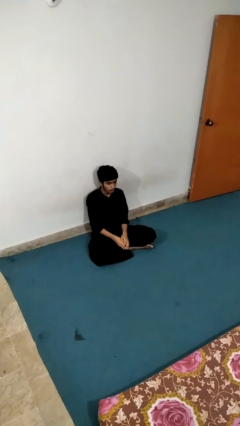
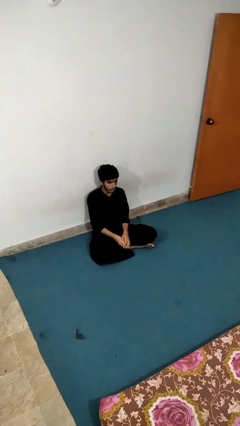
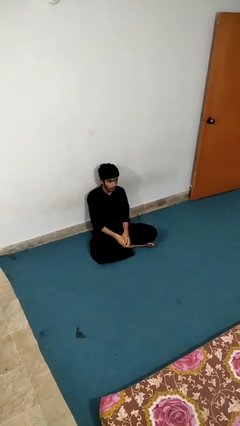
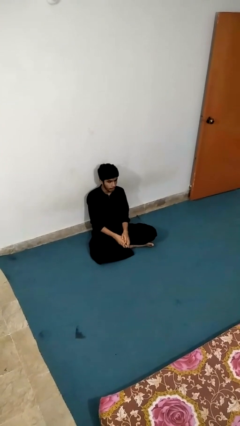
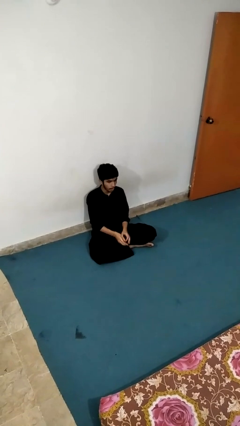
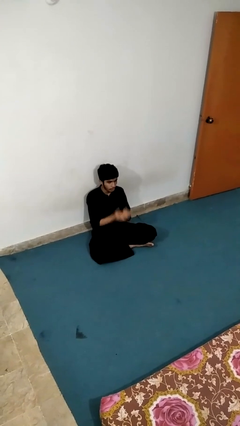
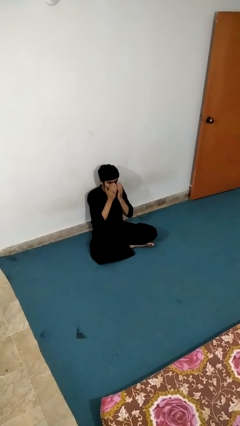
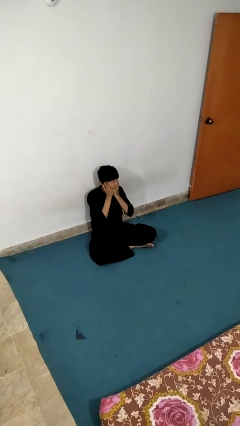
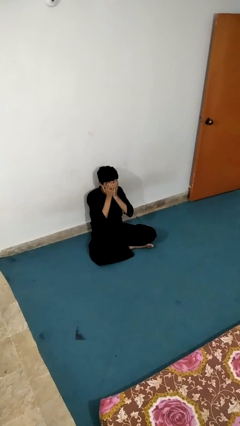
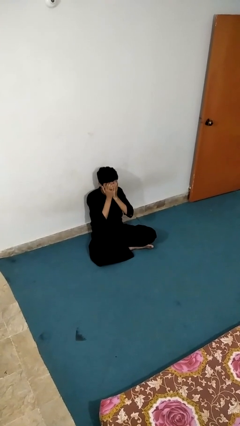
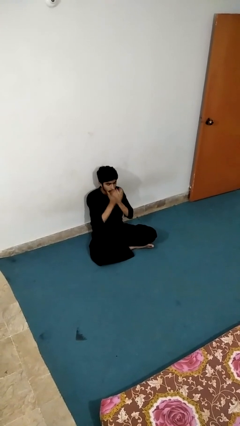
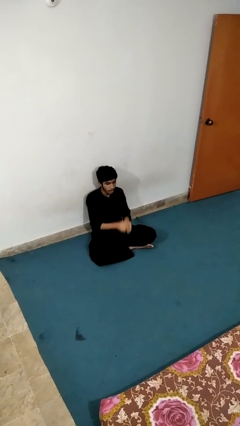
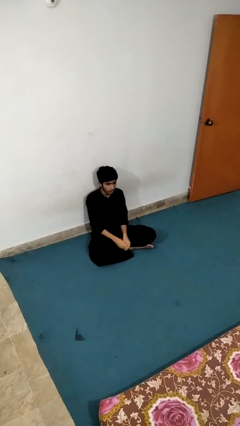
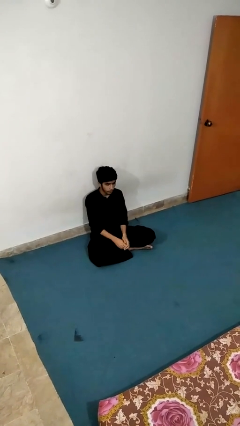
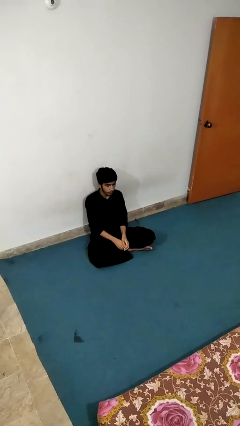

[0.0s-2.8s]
person covers face with hands

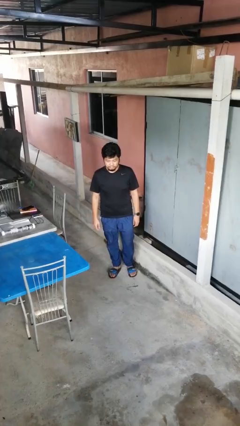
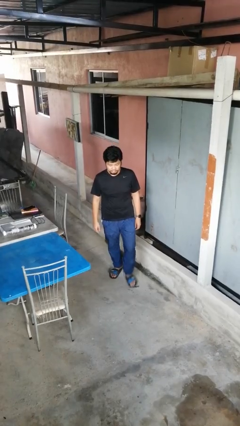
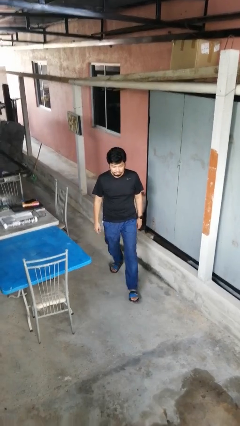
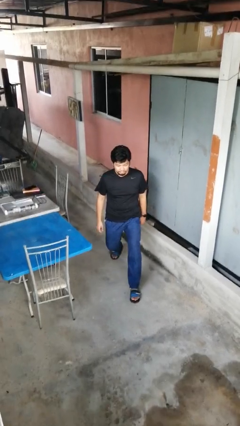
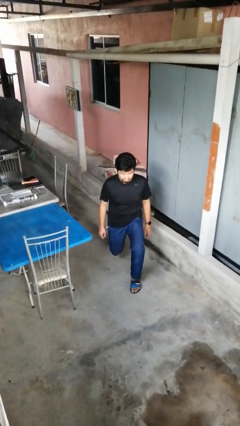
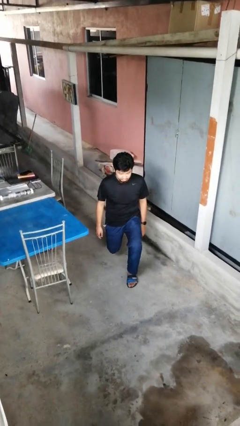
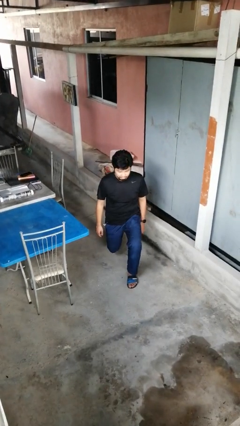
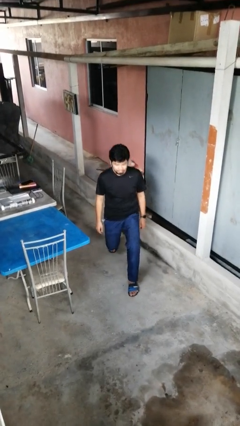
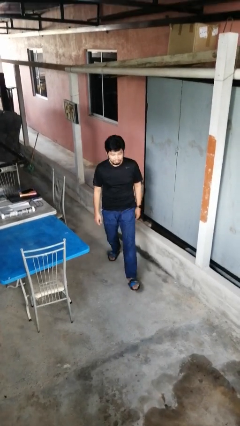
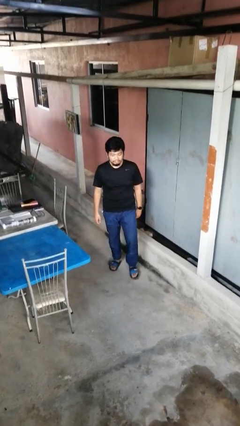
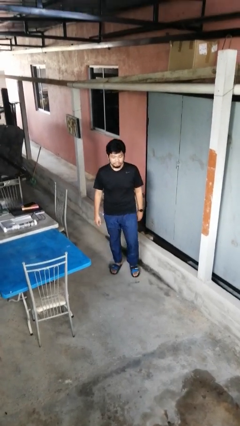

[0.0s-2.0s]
person exercises with lunges

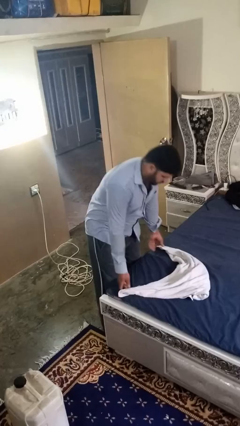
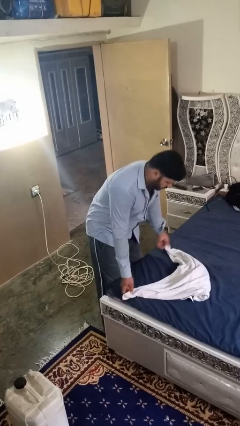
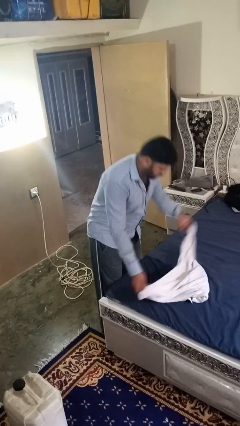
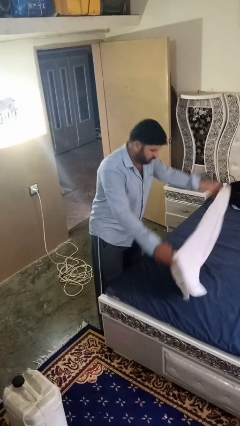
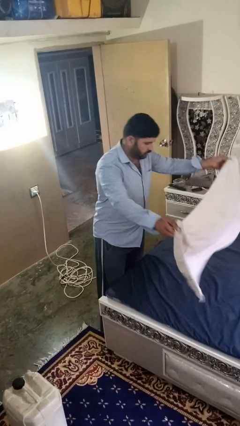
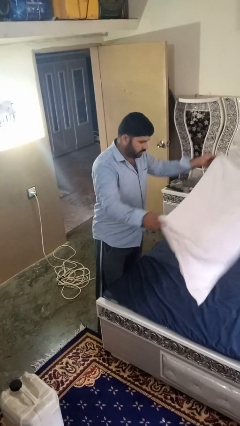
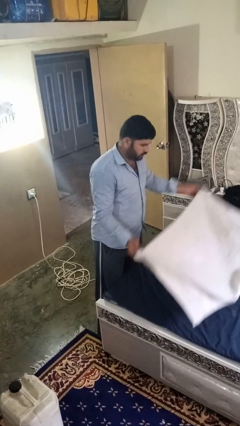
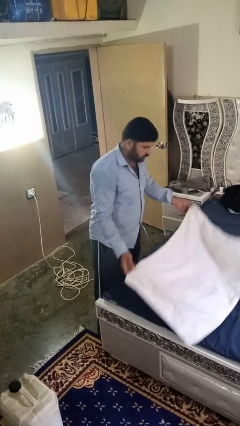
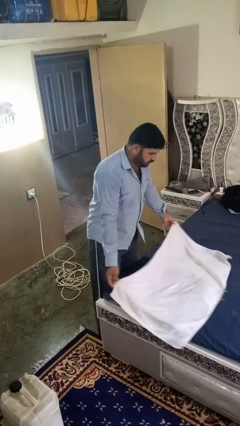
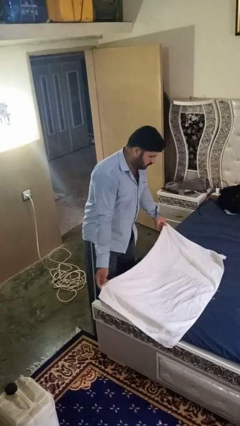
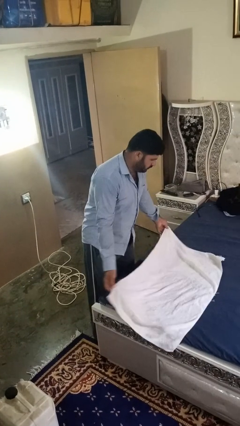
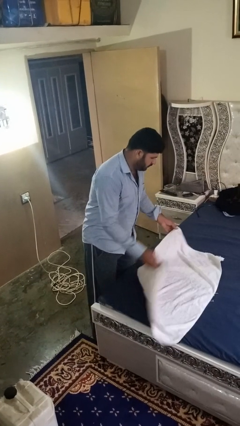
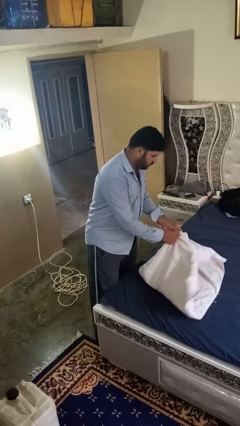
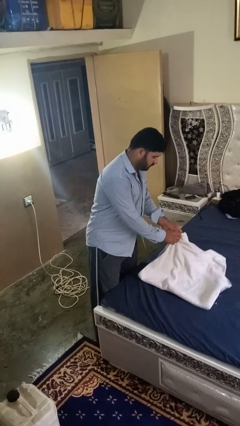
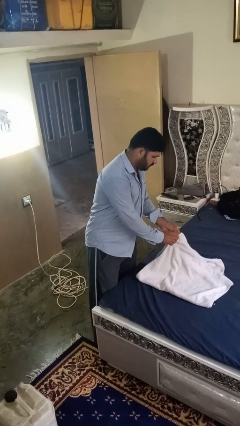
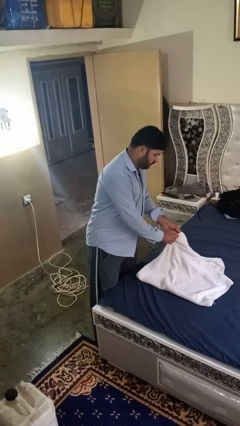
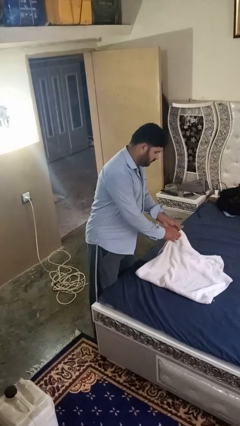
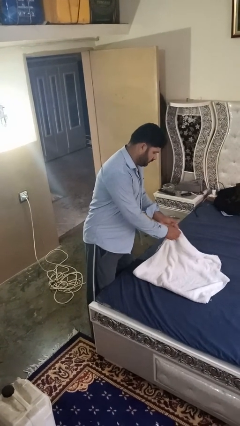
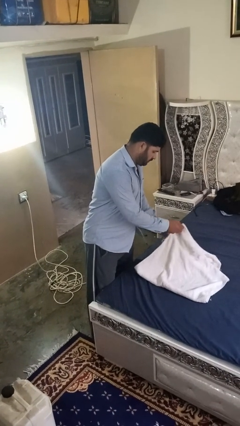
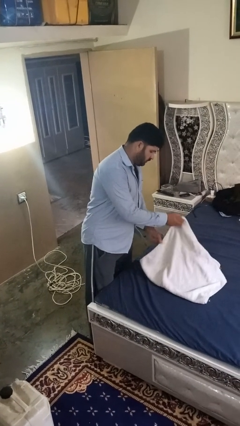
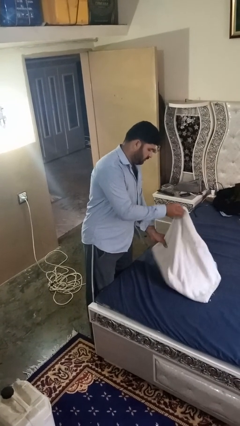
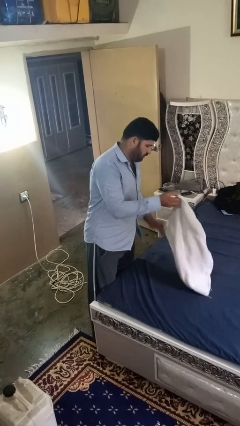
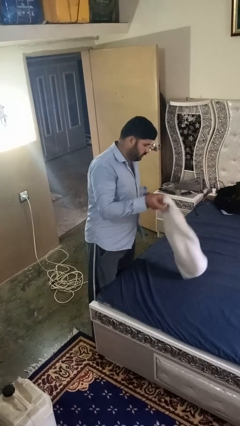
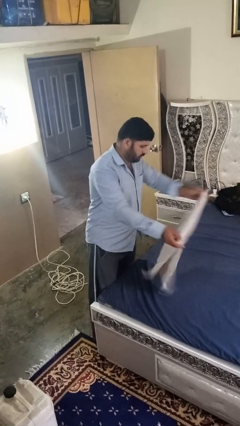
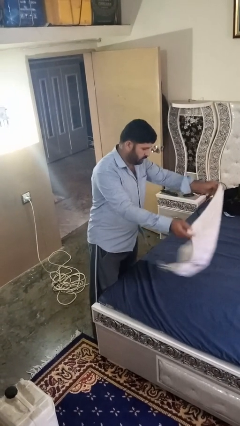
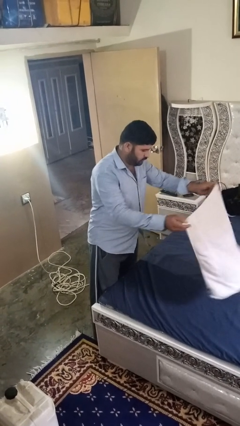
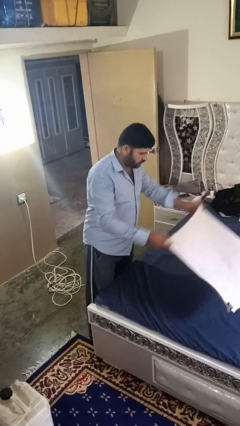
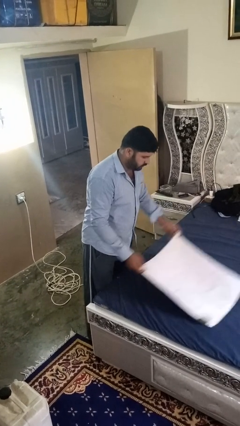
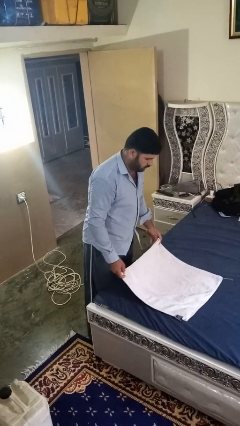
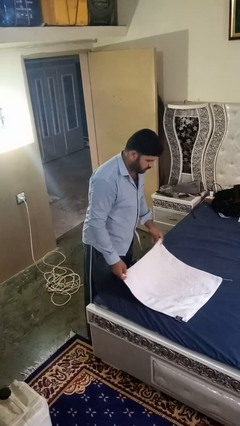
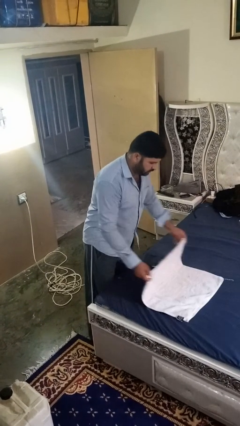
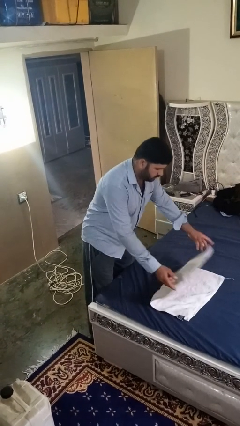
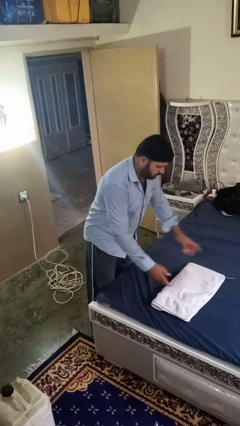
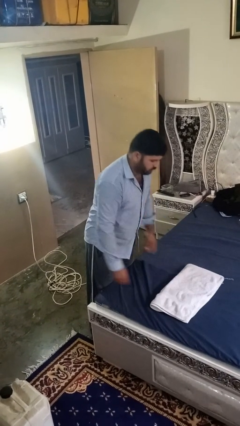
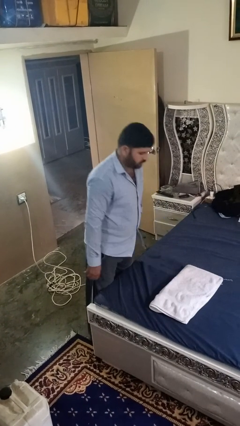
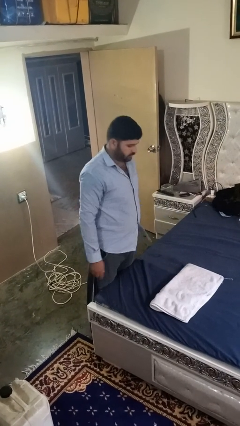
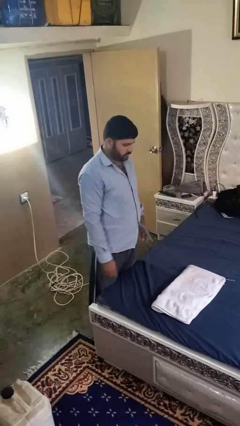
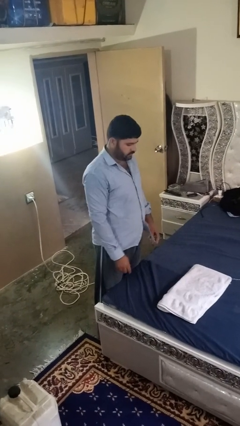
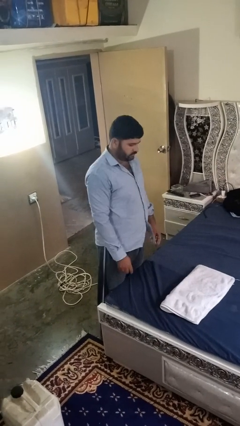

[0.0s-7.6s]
person folds towel

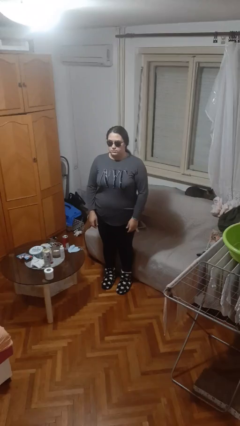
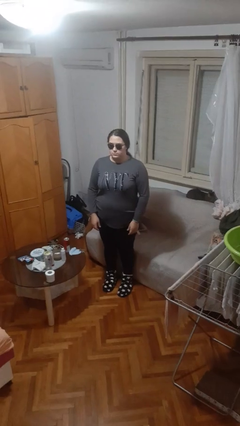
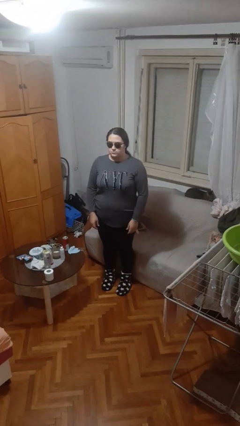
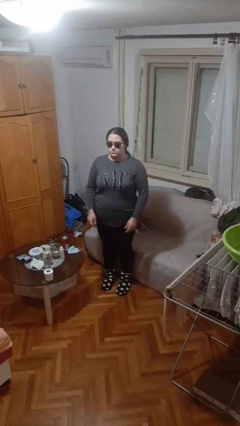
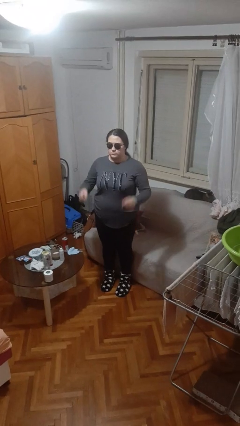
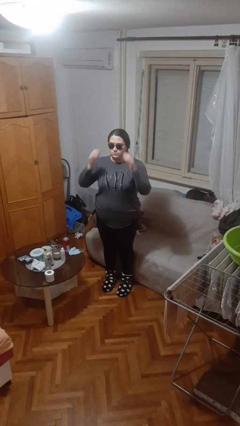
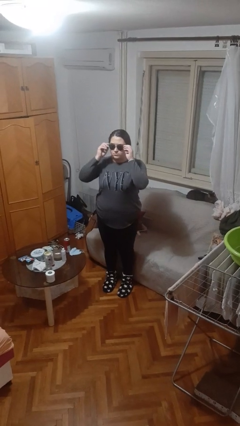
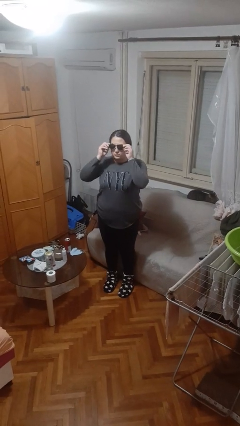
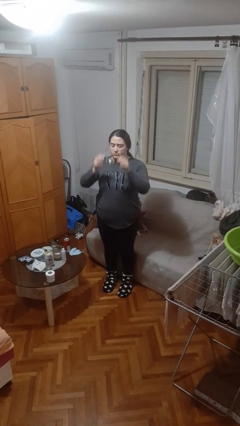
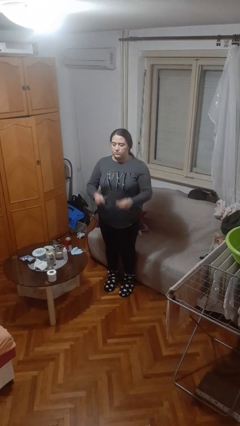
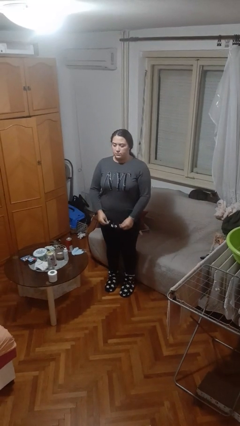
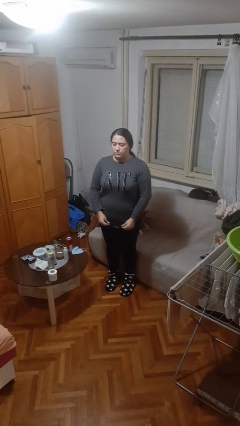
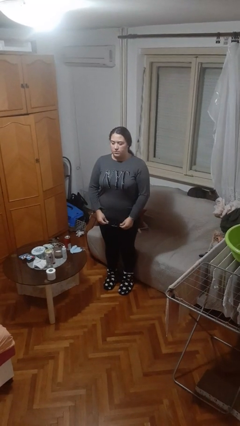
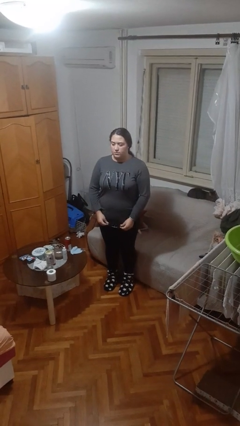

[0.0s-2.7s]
person takes off sunglasses

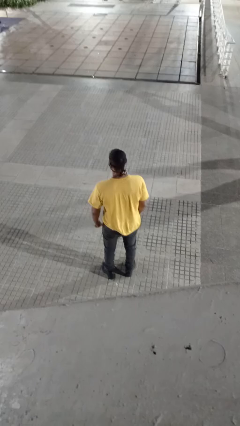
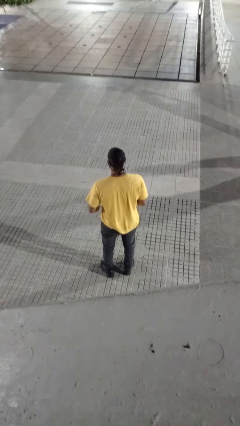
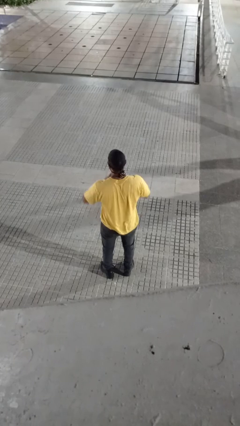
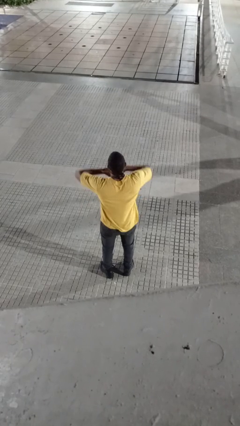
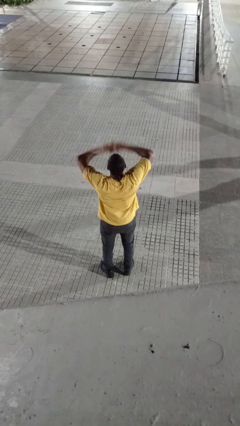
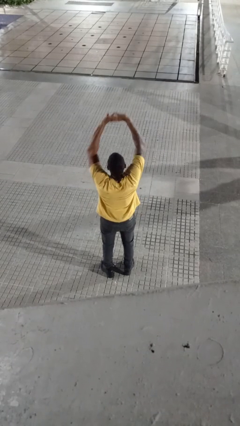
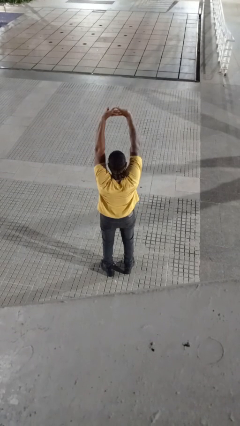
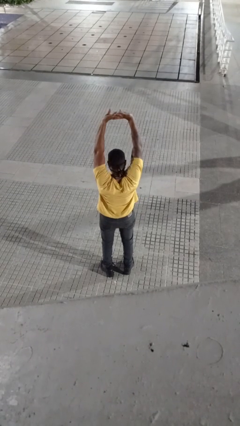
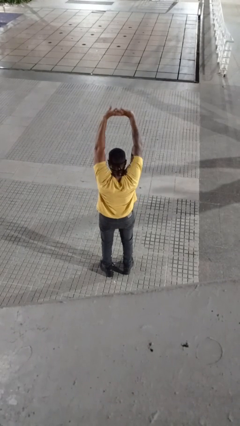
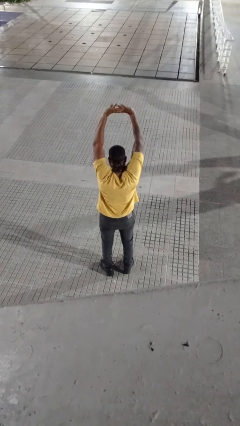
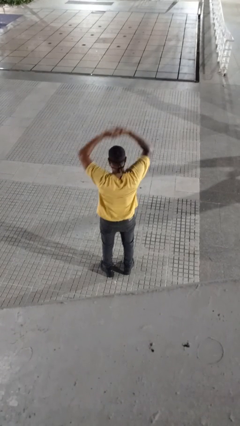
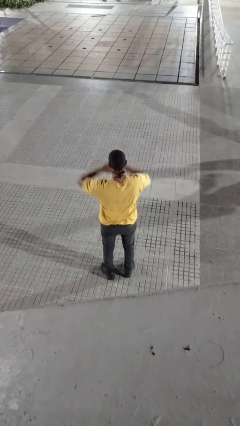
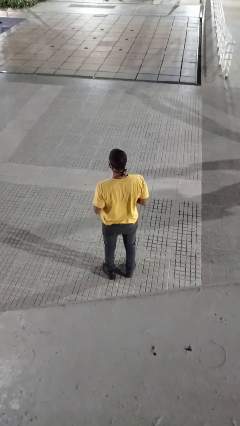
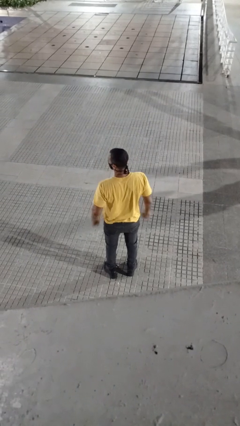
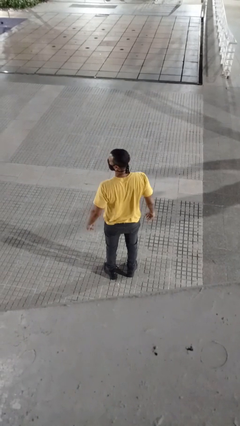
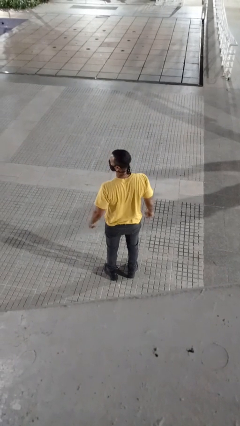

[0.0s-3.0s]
person stretches arms over head
